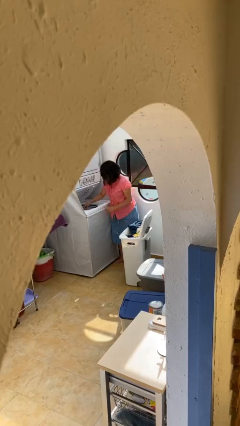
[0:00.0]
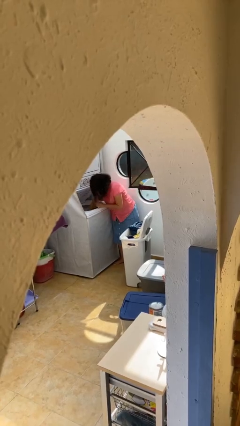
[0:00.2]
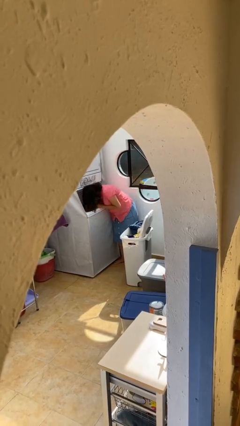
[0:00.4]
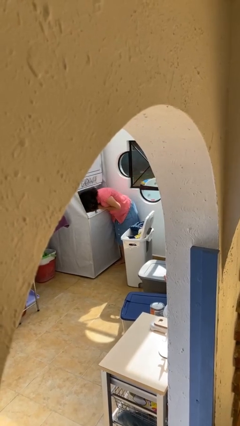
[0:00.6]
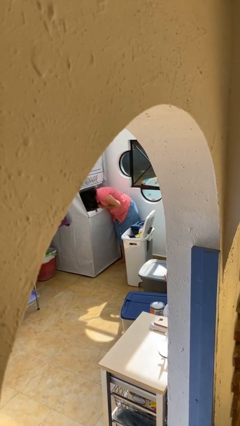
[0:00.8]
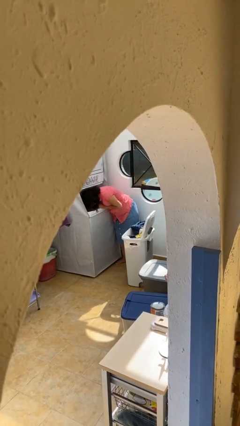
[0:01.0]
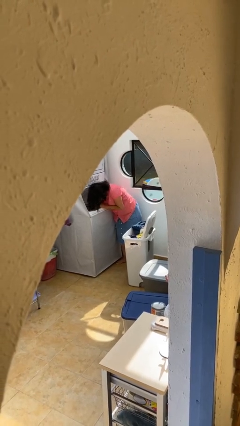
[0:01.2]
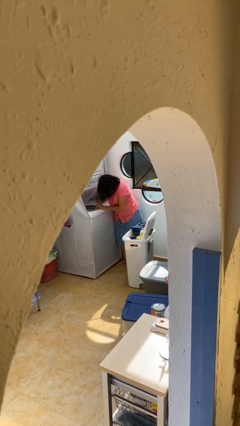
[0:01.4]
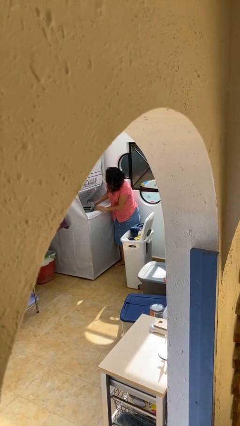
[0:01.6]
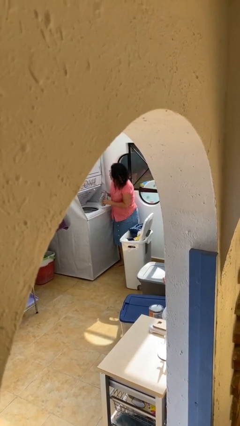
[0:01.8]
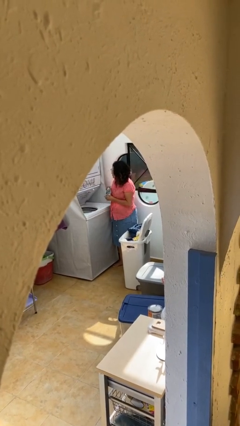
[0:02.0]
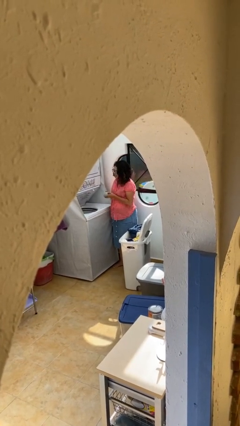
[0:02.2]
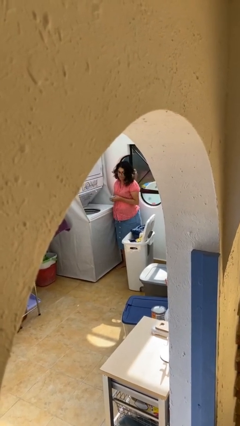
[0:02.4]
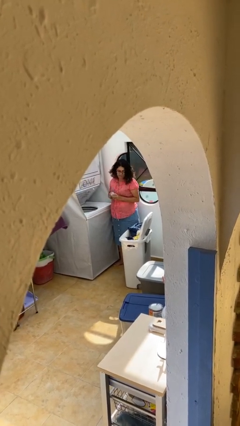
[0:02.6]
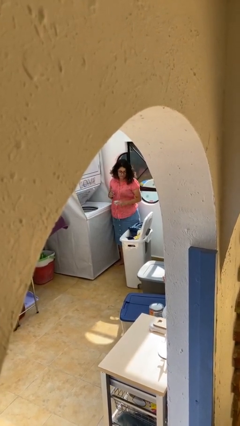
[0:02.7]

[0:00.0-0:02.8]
person loads clotheswasher

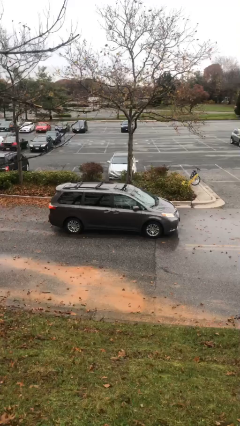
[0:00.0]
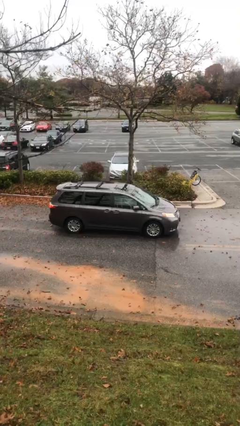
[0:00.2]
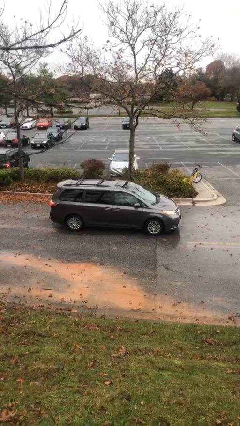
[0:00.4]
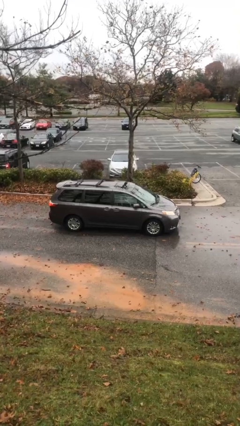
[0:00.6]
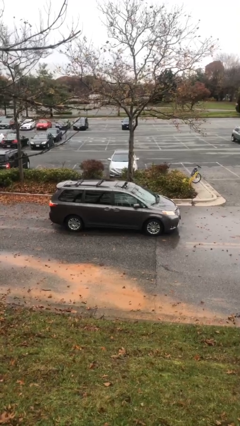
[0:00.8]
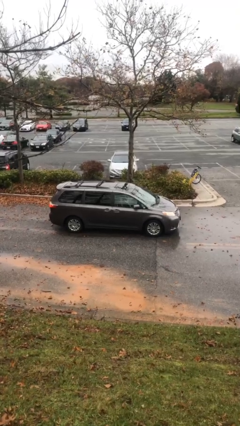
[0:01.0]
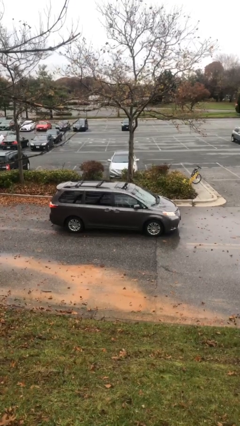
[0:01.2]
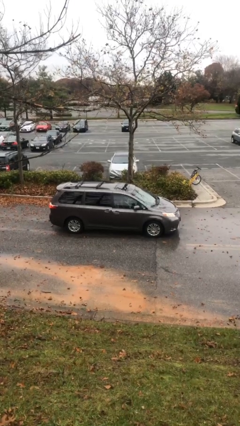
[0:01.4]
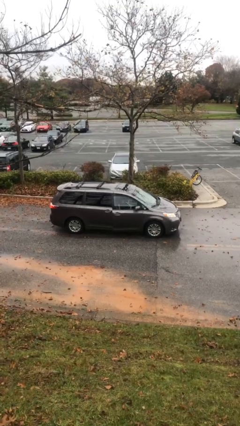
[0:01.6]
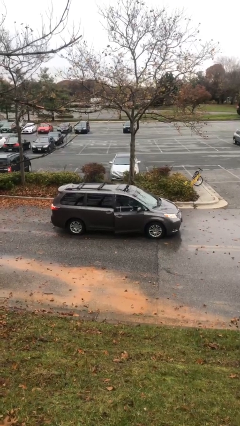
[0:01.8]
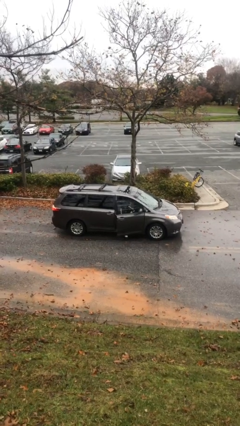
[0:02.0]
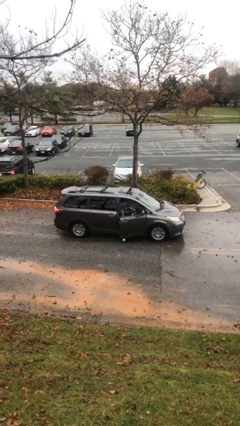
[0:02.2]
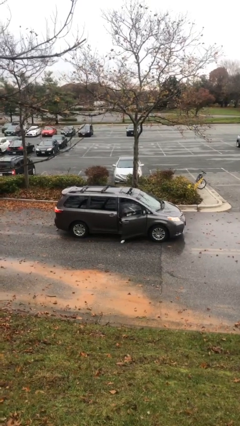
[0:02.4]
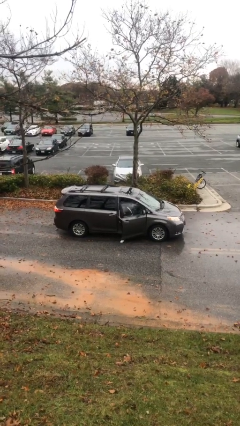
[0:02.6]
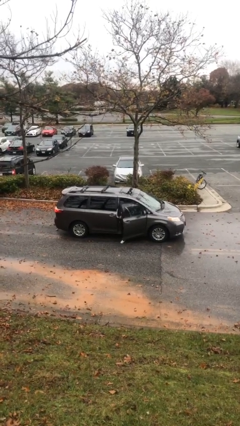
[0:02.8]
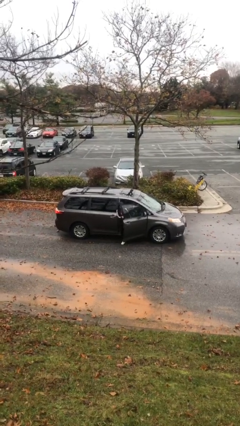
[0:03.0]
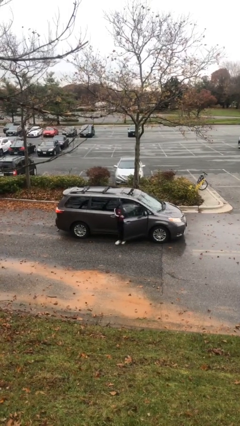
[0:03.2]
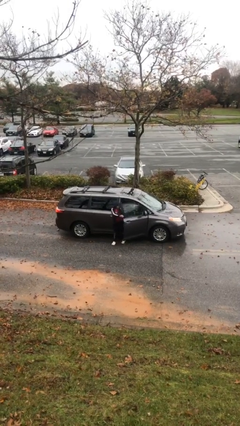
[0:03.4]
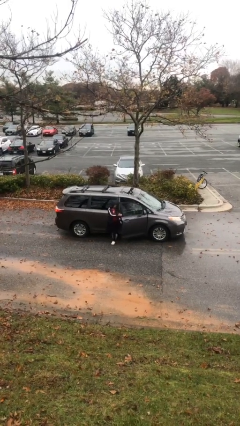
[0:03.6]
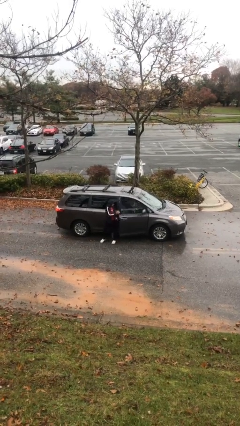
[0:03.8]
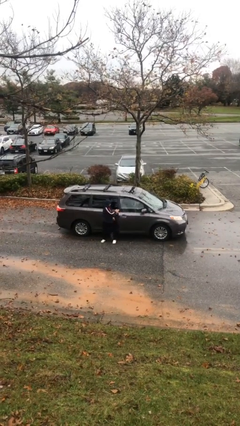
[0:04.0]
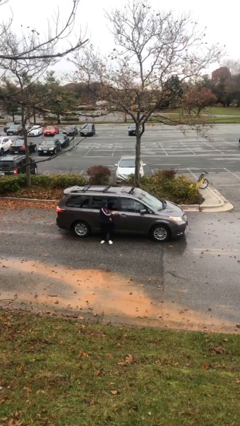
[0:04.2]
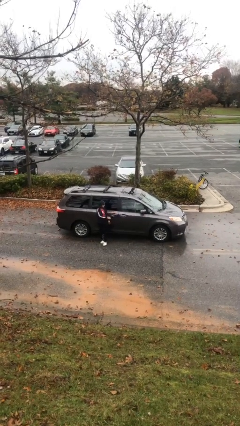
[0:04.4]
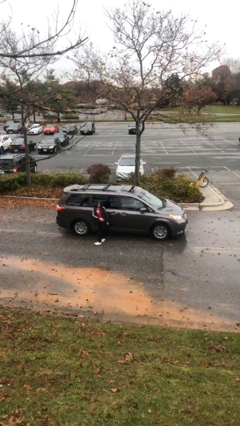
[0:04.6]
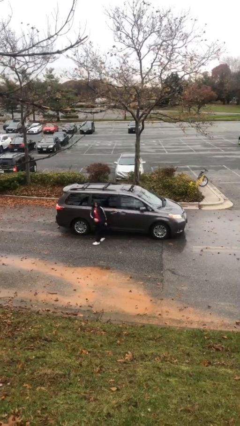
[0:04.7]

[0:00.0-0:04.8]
car drops off person

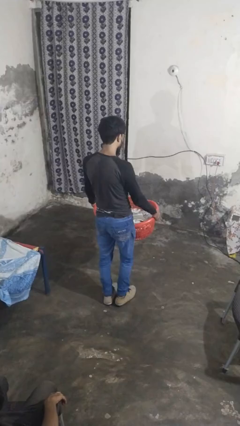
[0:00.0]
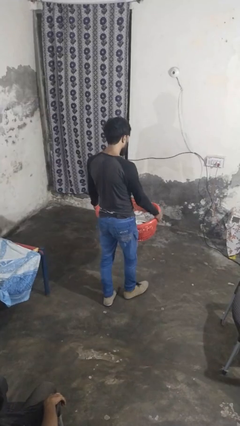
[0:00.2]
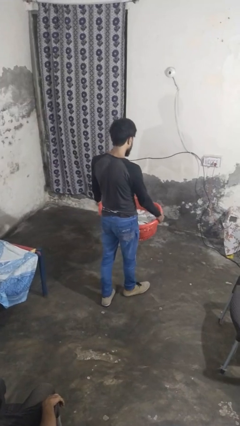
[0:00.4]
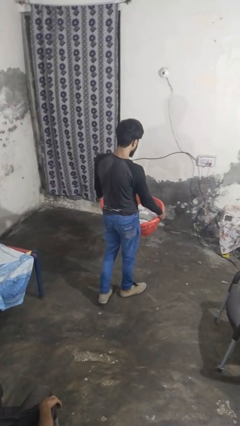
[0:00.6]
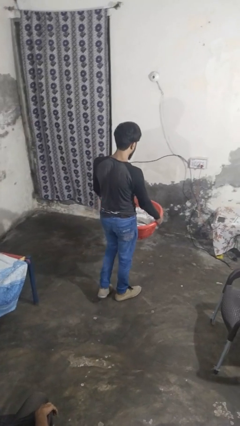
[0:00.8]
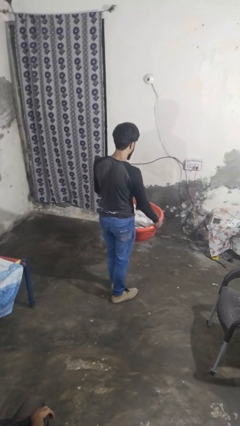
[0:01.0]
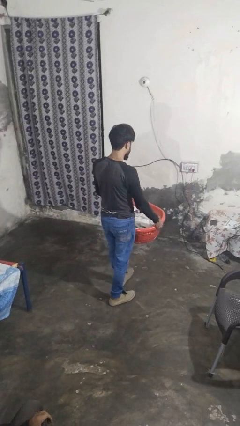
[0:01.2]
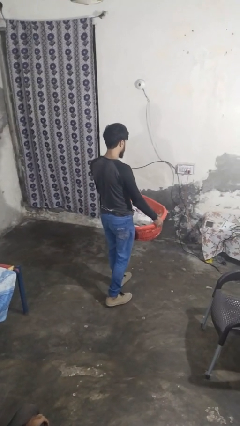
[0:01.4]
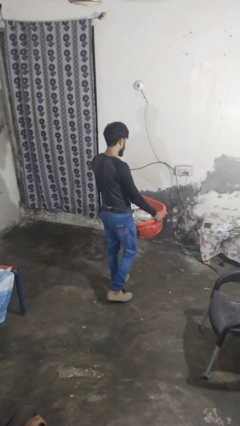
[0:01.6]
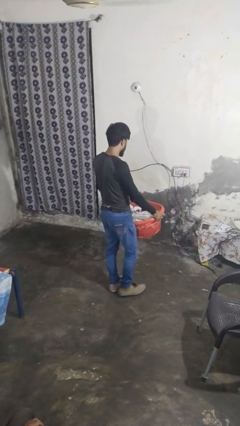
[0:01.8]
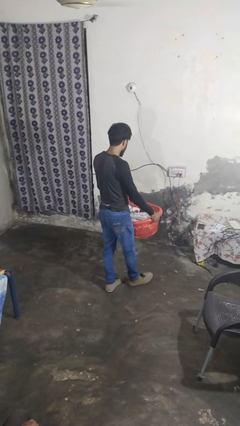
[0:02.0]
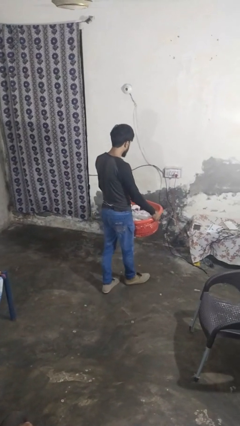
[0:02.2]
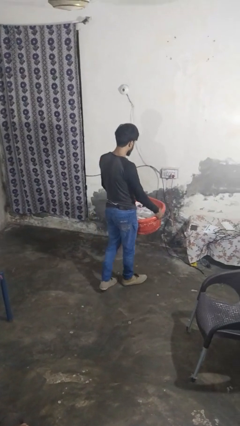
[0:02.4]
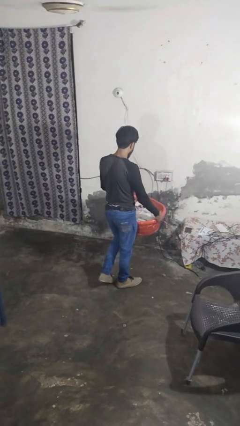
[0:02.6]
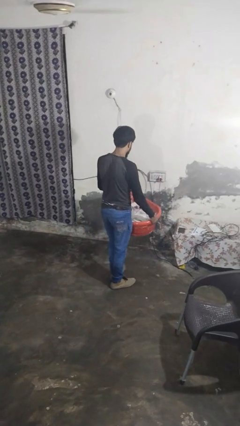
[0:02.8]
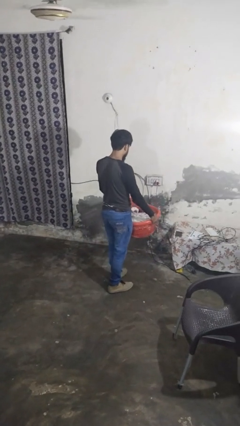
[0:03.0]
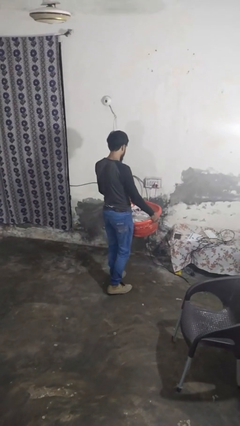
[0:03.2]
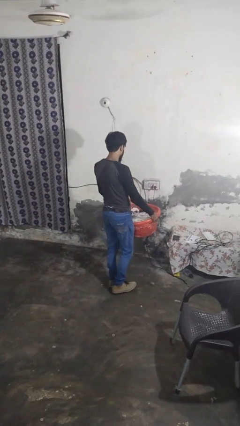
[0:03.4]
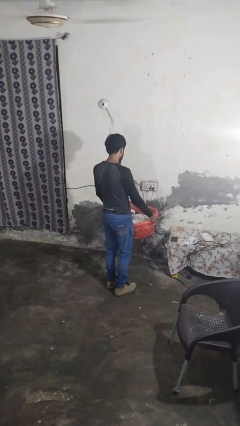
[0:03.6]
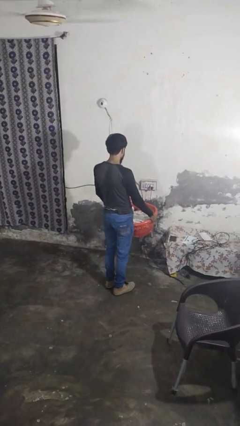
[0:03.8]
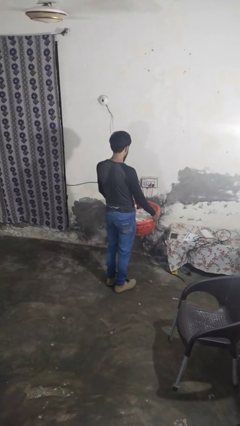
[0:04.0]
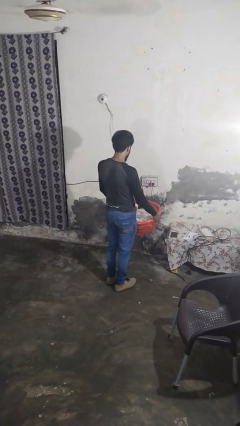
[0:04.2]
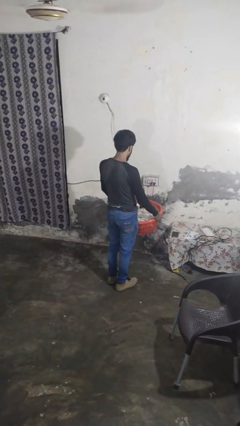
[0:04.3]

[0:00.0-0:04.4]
person carries laundry basket

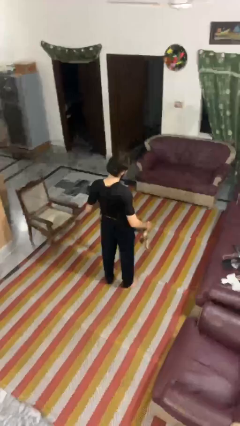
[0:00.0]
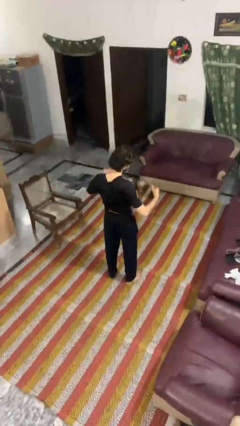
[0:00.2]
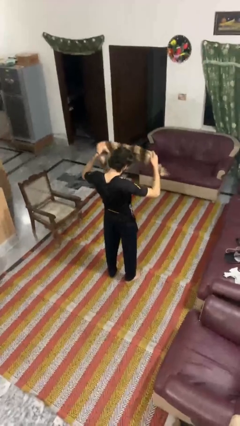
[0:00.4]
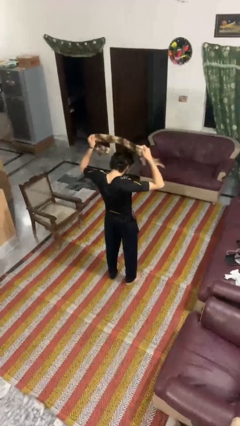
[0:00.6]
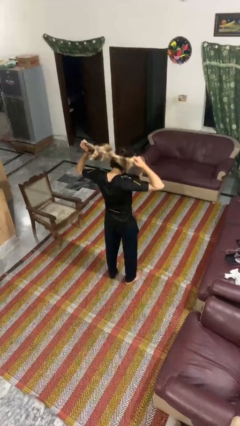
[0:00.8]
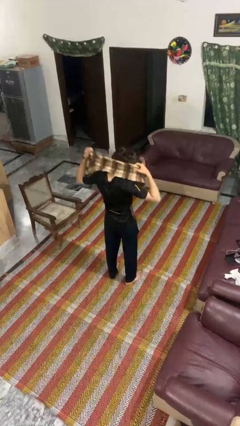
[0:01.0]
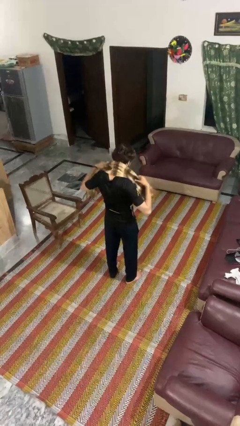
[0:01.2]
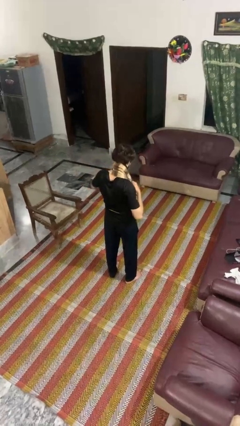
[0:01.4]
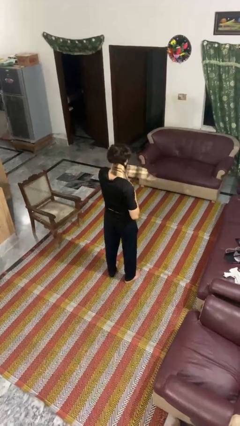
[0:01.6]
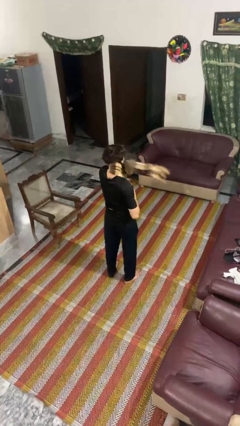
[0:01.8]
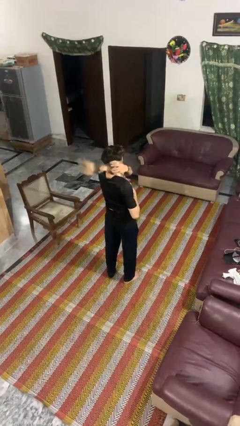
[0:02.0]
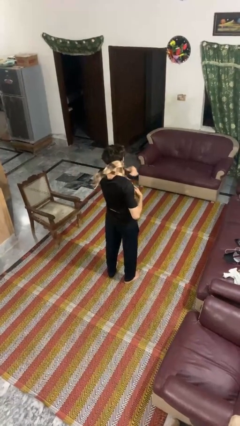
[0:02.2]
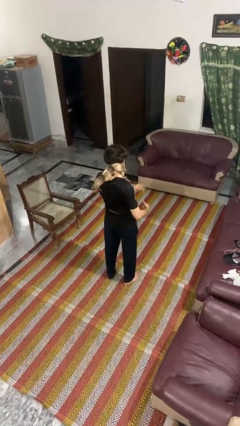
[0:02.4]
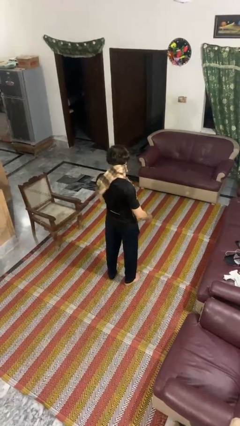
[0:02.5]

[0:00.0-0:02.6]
person puts on scarf

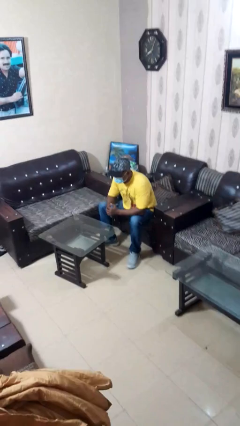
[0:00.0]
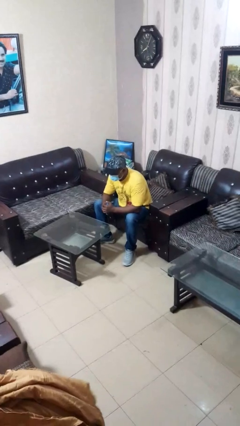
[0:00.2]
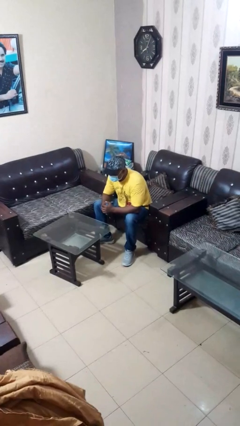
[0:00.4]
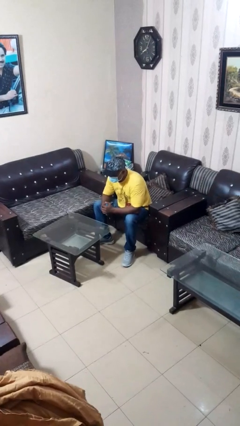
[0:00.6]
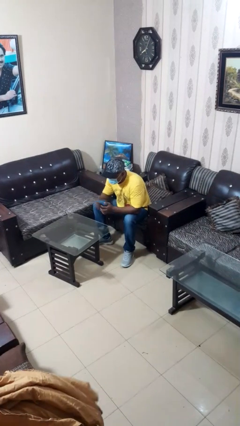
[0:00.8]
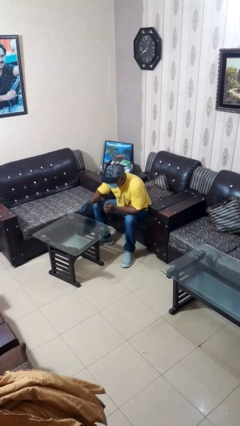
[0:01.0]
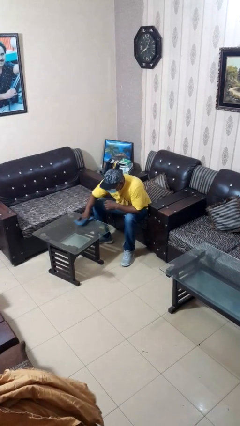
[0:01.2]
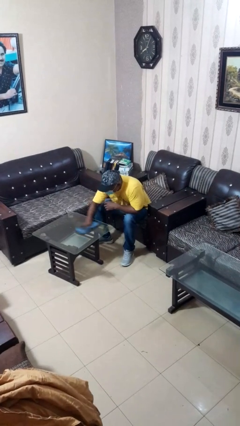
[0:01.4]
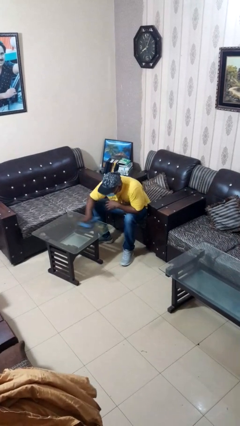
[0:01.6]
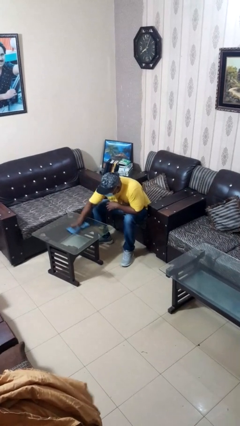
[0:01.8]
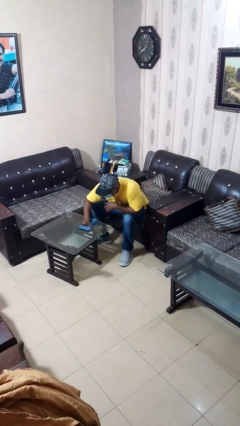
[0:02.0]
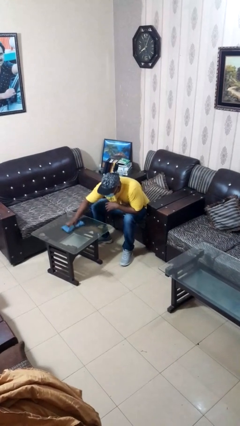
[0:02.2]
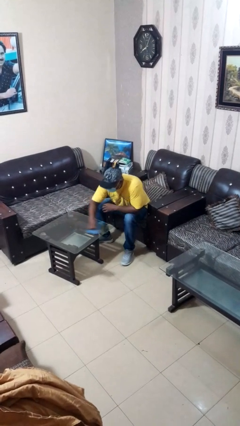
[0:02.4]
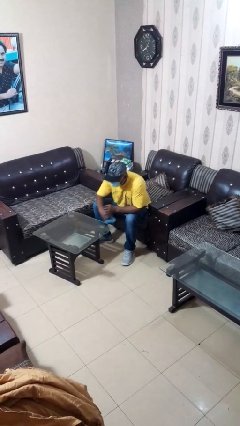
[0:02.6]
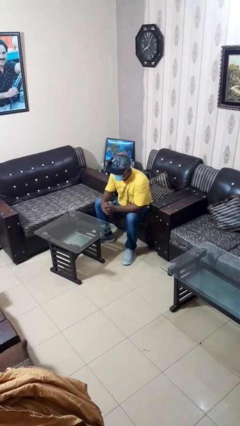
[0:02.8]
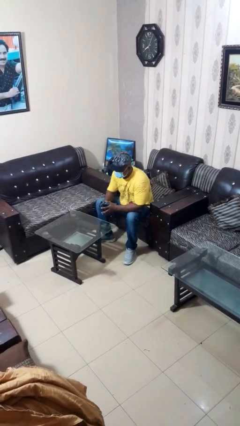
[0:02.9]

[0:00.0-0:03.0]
person cleans table with rag
